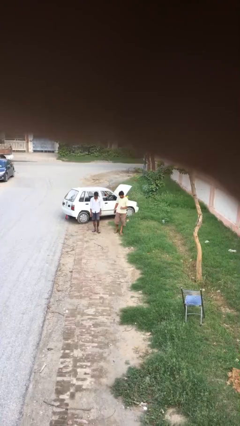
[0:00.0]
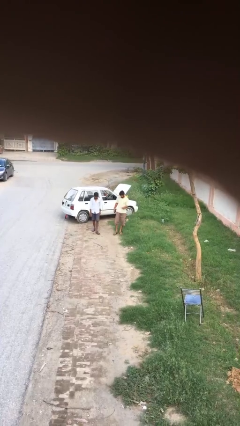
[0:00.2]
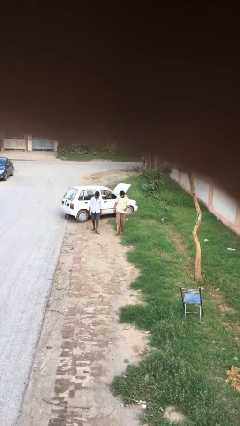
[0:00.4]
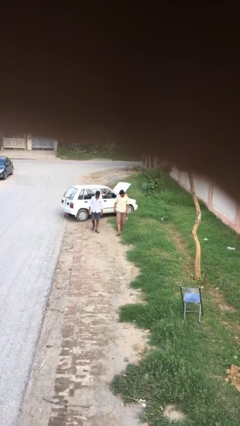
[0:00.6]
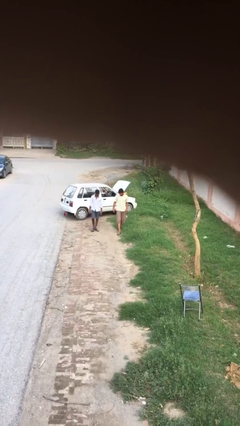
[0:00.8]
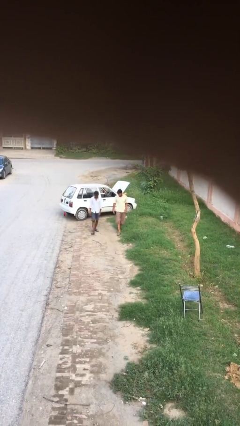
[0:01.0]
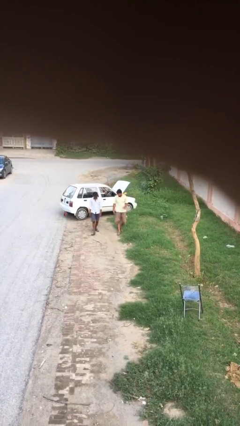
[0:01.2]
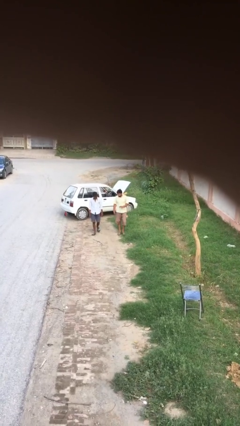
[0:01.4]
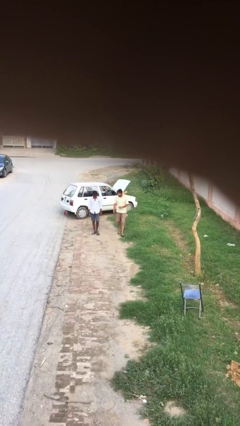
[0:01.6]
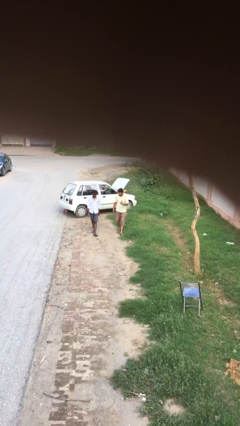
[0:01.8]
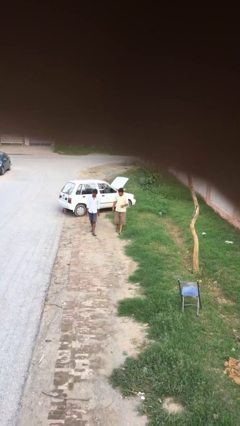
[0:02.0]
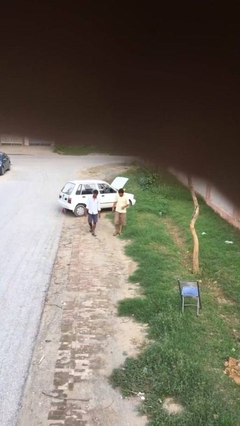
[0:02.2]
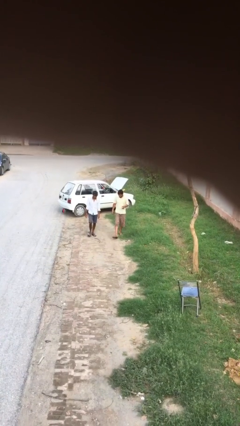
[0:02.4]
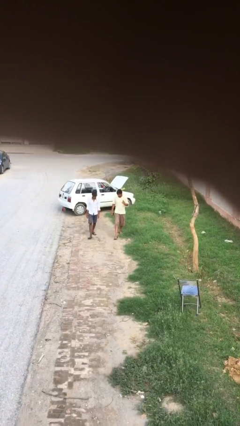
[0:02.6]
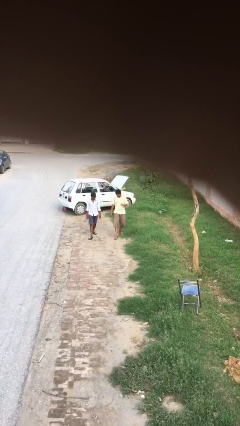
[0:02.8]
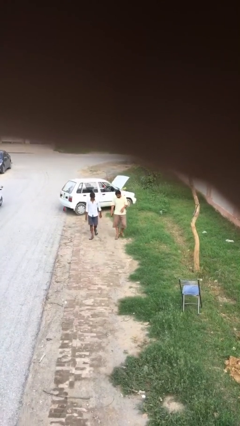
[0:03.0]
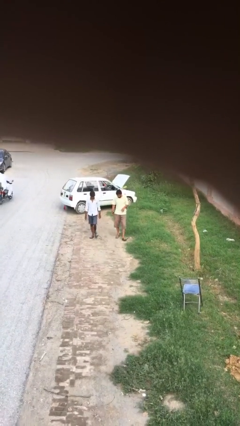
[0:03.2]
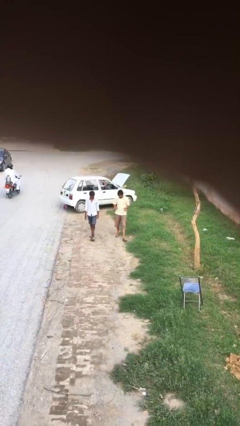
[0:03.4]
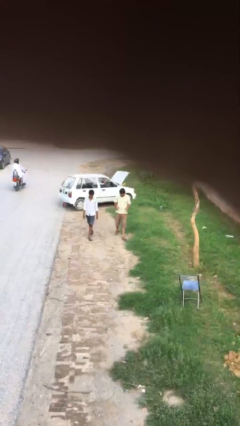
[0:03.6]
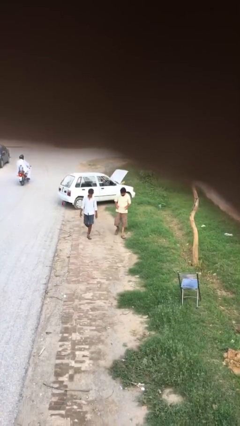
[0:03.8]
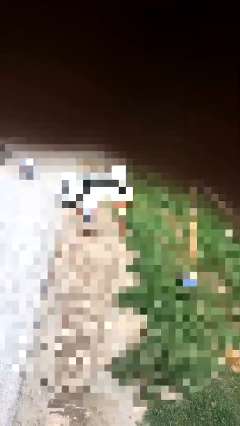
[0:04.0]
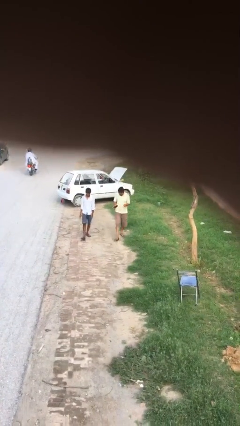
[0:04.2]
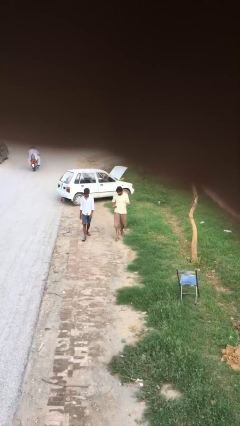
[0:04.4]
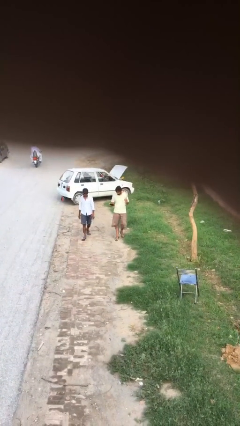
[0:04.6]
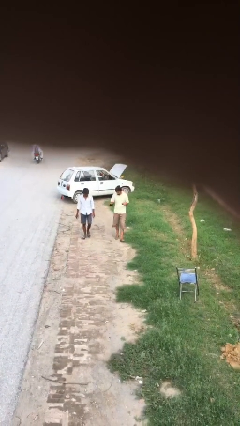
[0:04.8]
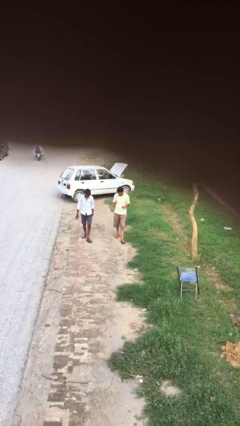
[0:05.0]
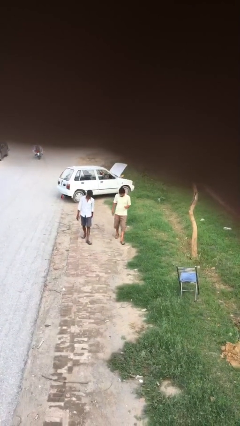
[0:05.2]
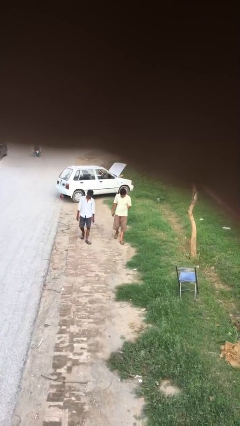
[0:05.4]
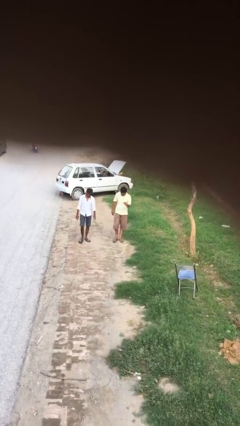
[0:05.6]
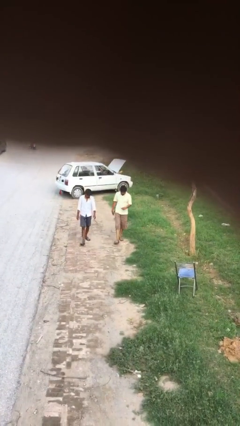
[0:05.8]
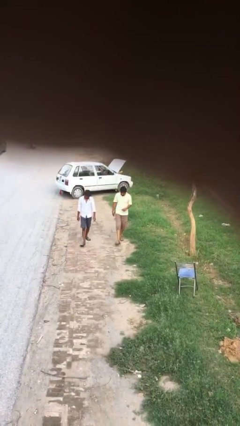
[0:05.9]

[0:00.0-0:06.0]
person talks to person

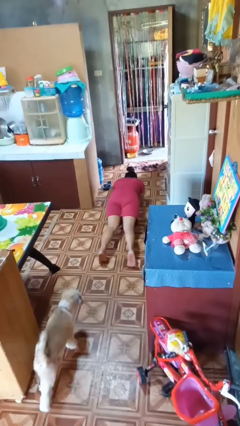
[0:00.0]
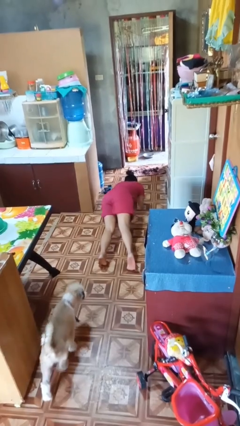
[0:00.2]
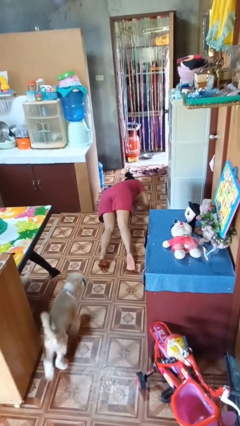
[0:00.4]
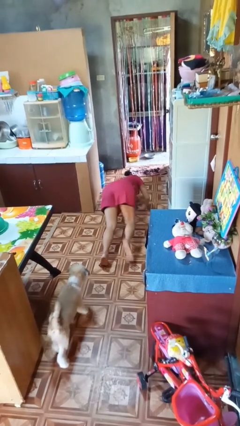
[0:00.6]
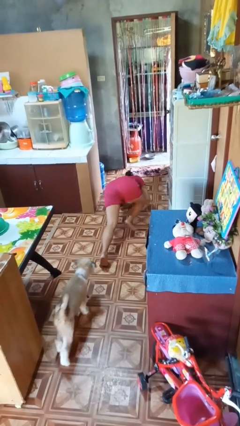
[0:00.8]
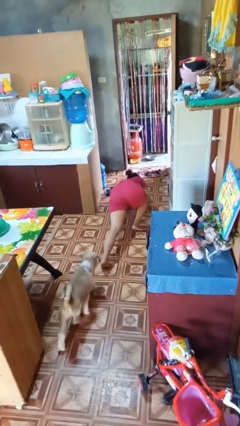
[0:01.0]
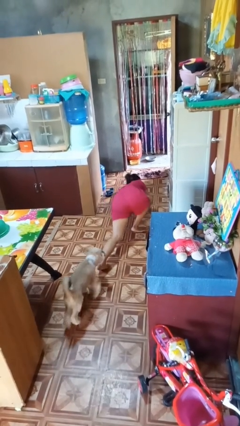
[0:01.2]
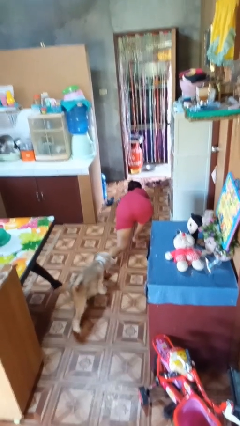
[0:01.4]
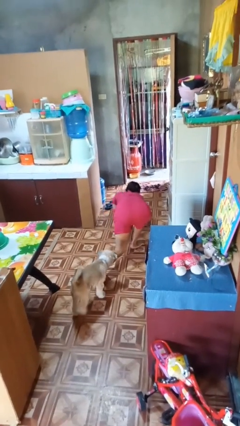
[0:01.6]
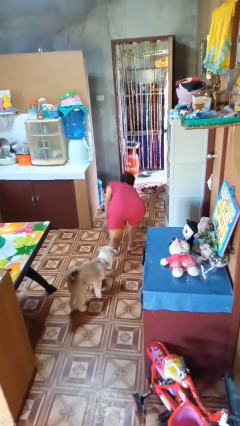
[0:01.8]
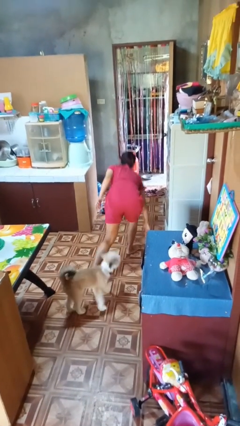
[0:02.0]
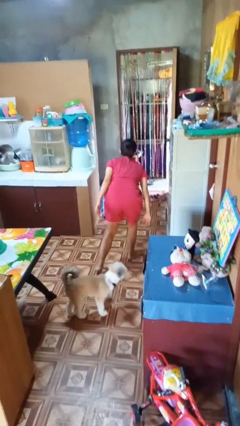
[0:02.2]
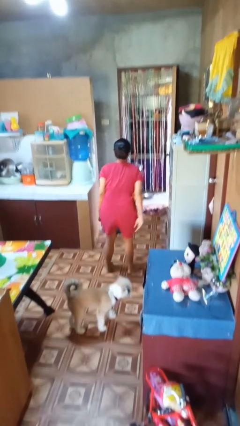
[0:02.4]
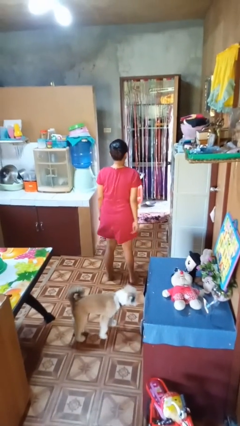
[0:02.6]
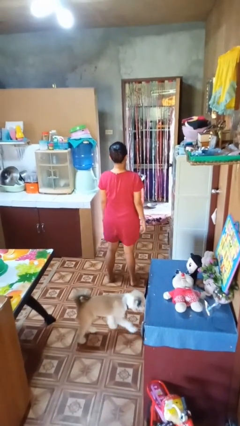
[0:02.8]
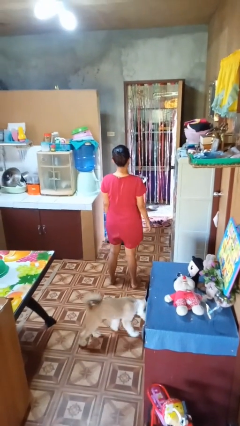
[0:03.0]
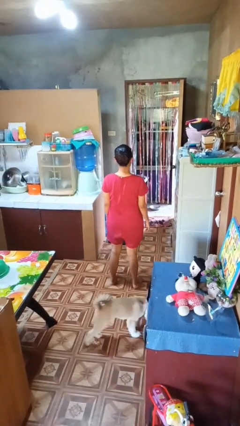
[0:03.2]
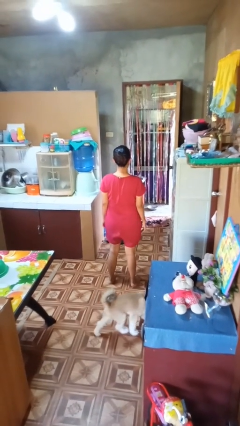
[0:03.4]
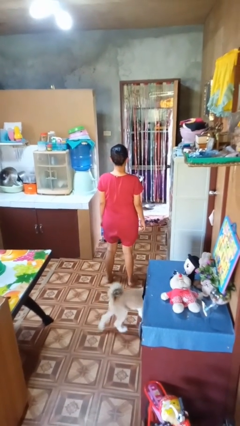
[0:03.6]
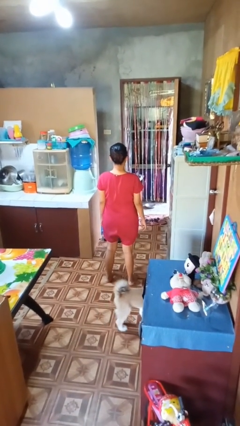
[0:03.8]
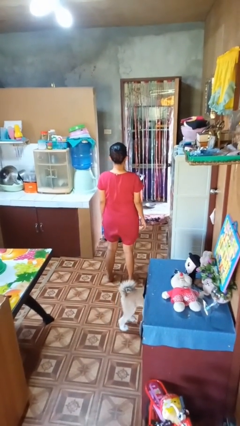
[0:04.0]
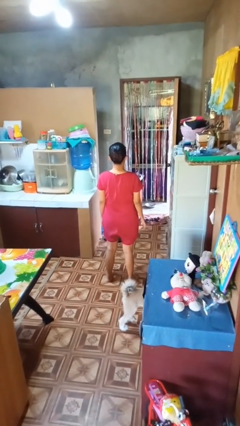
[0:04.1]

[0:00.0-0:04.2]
person stands up from floor

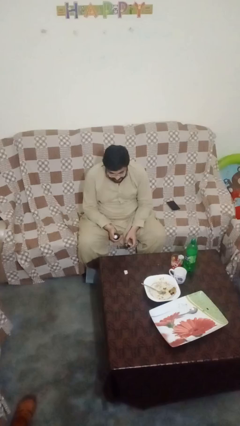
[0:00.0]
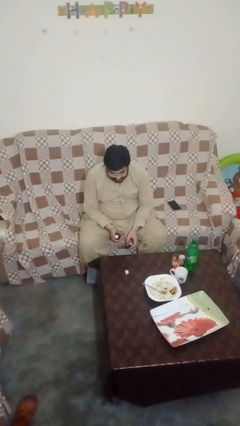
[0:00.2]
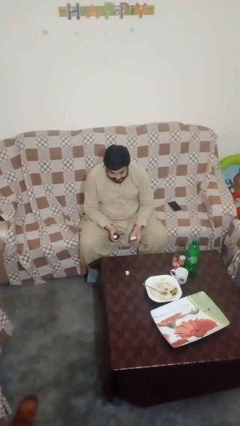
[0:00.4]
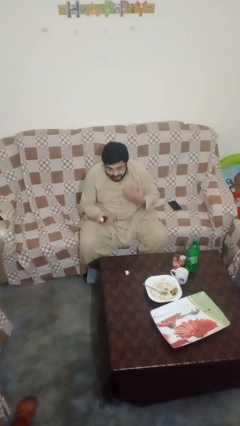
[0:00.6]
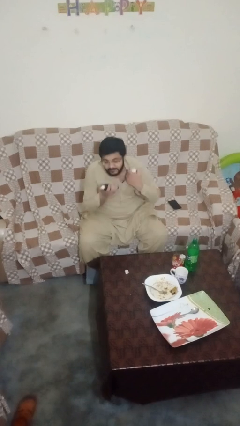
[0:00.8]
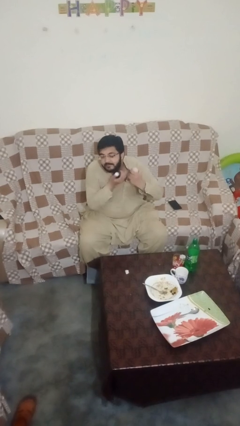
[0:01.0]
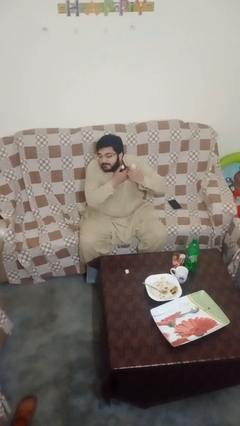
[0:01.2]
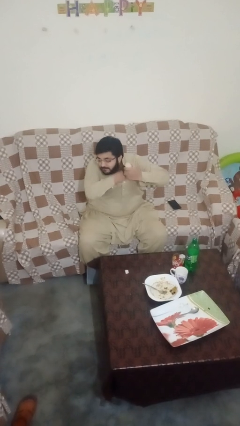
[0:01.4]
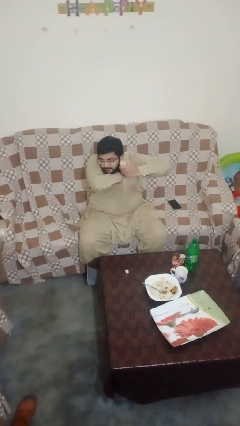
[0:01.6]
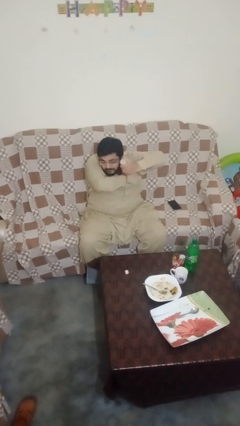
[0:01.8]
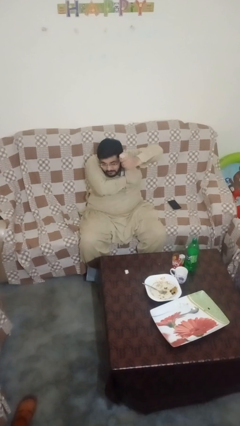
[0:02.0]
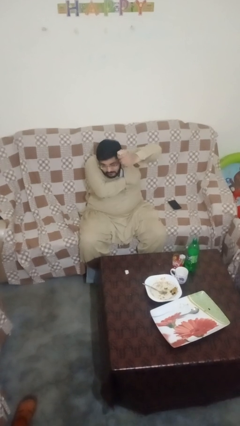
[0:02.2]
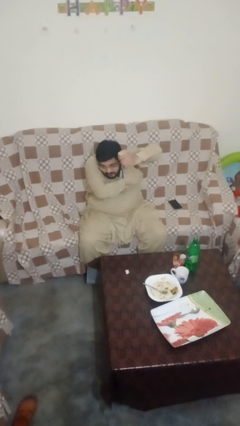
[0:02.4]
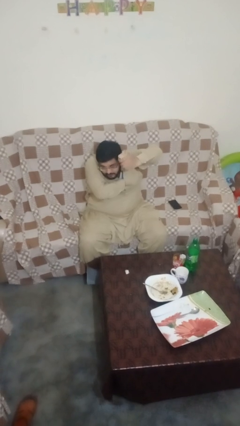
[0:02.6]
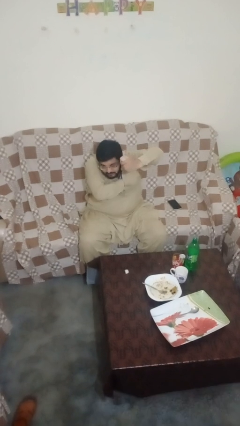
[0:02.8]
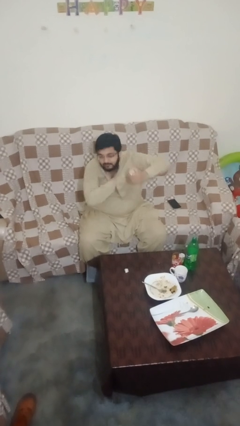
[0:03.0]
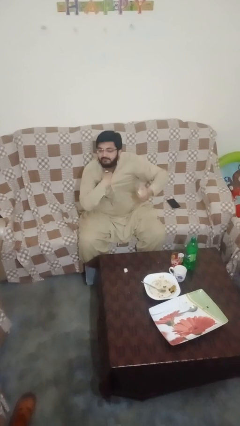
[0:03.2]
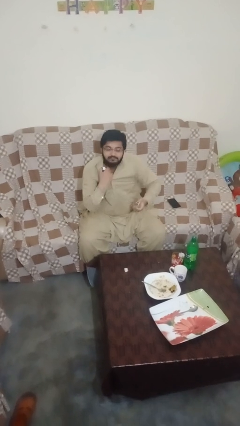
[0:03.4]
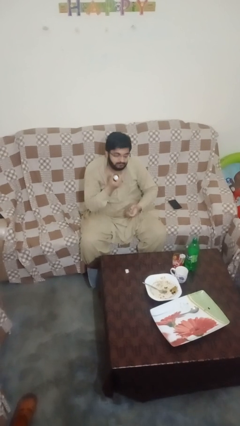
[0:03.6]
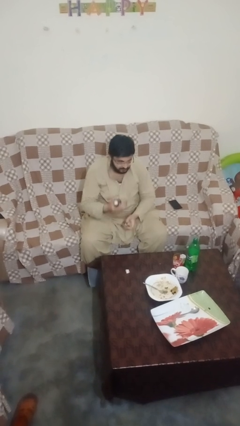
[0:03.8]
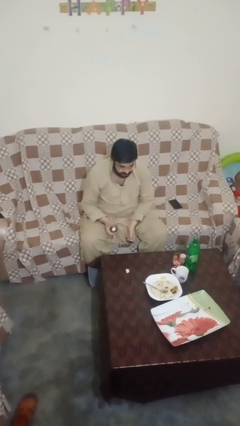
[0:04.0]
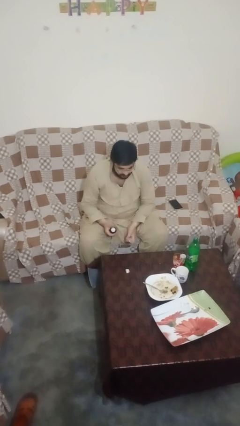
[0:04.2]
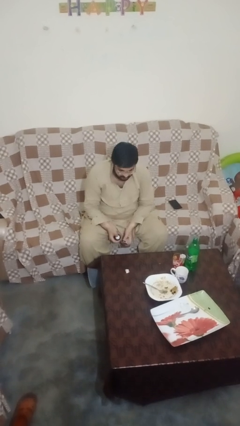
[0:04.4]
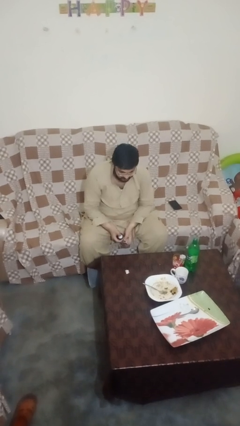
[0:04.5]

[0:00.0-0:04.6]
person applies deodorant

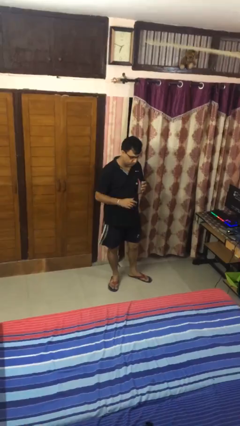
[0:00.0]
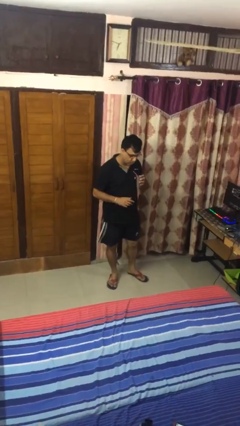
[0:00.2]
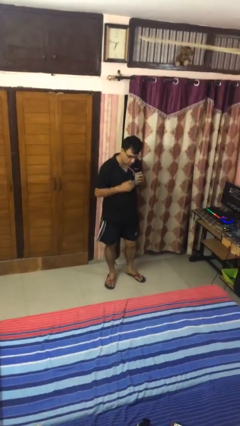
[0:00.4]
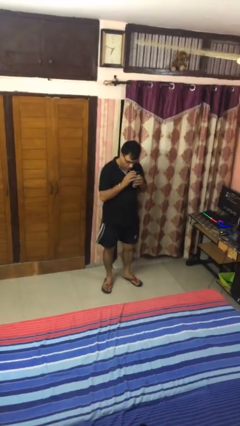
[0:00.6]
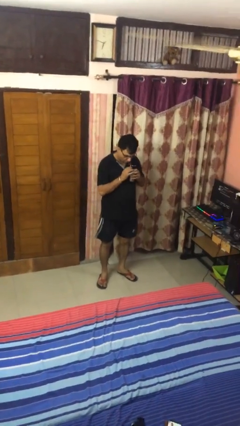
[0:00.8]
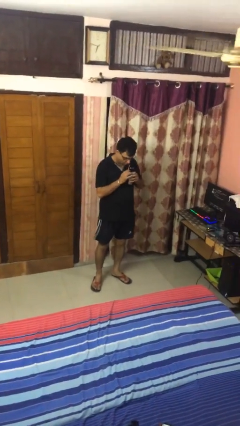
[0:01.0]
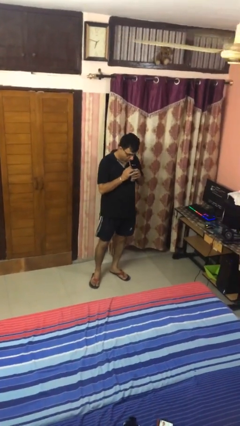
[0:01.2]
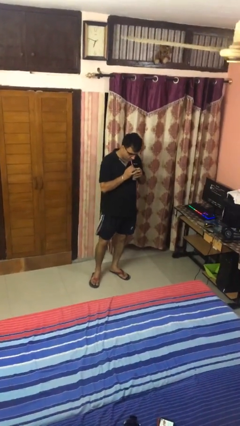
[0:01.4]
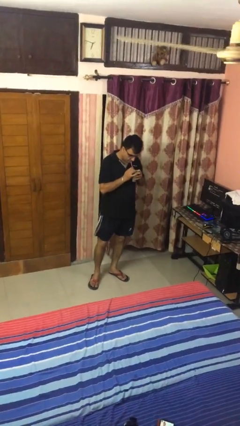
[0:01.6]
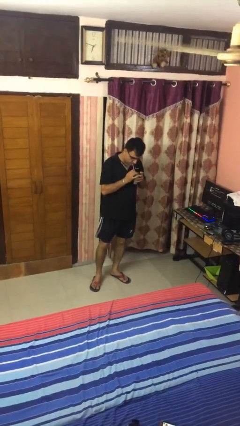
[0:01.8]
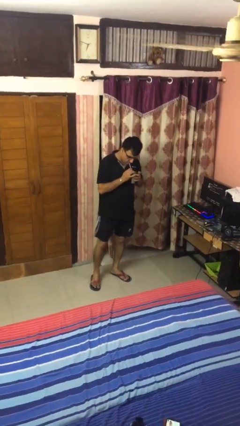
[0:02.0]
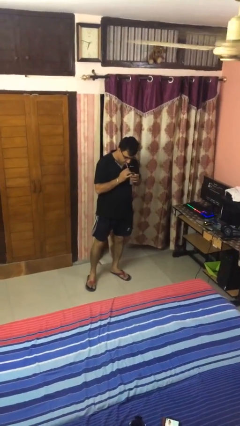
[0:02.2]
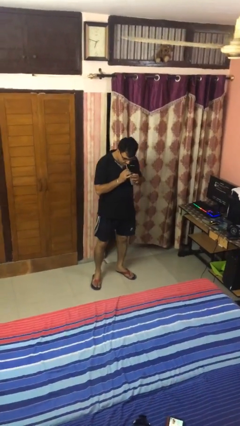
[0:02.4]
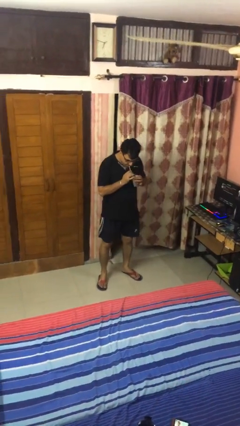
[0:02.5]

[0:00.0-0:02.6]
person drinks from straw

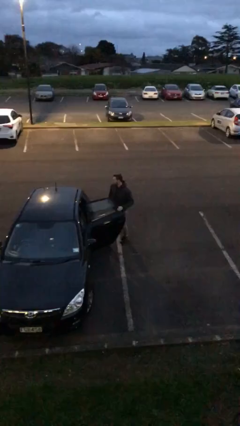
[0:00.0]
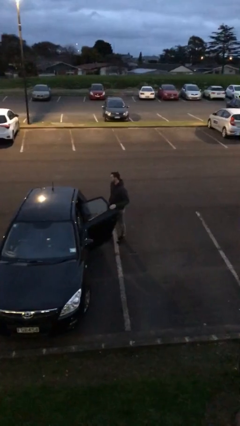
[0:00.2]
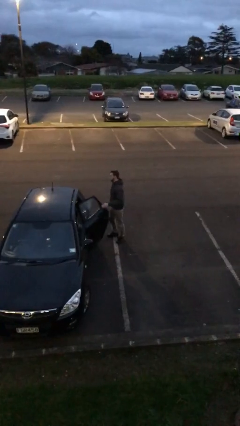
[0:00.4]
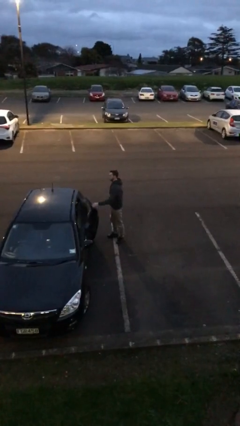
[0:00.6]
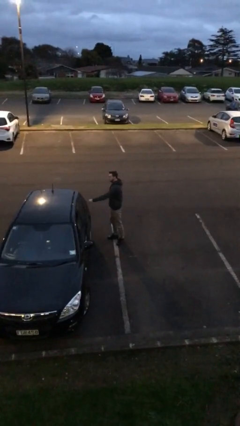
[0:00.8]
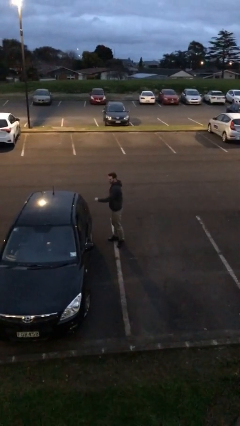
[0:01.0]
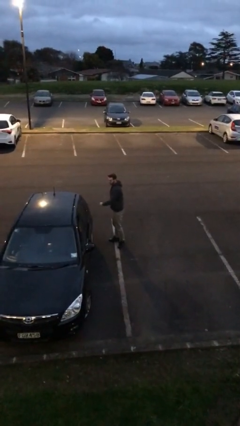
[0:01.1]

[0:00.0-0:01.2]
person closes car door
